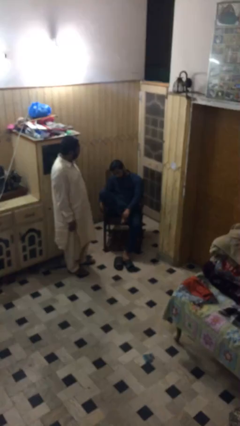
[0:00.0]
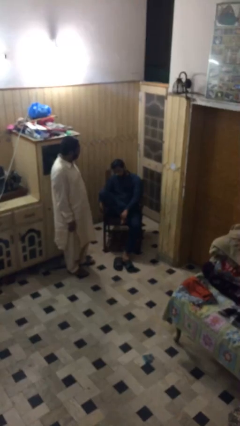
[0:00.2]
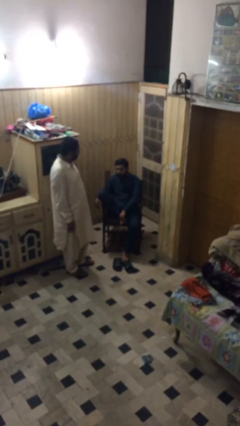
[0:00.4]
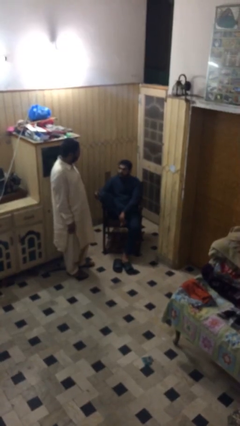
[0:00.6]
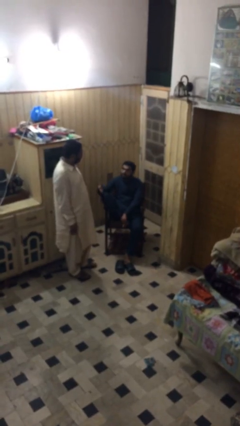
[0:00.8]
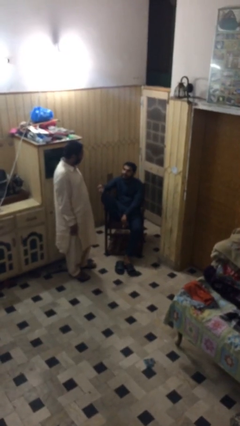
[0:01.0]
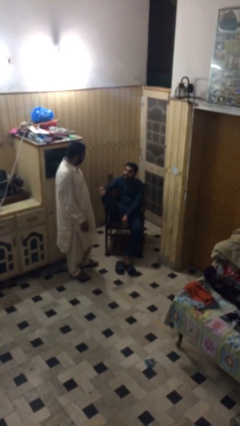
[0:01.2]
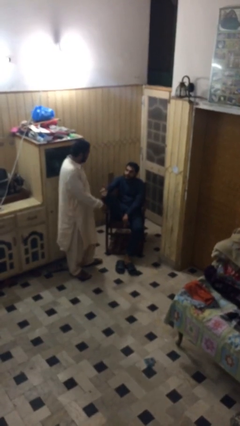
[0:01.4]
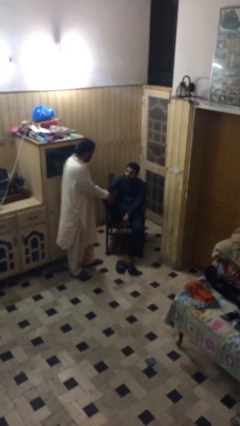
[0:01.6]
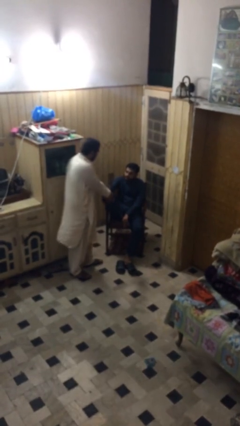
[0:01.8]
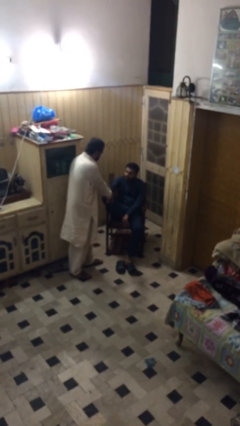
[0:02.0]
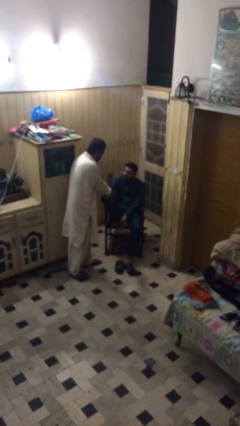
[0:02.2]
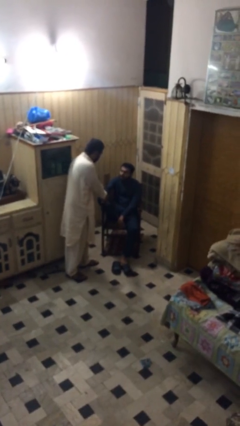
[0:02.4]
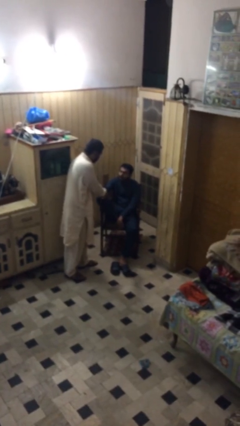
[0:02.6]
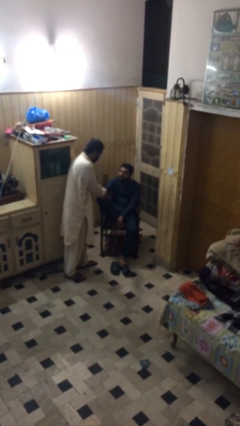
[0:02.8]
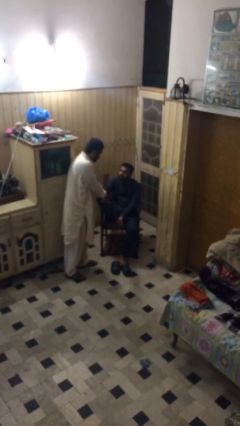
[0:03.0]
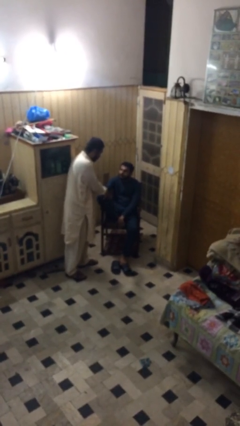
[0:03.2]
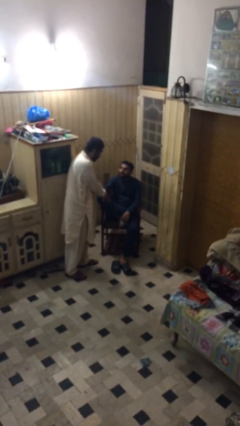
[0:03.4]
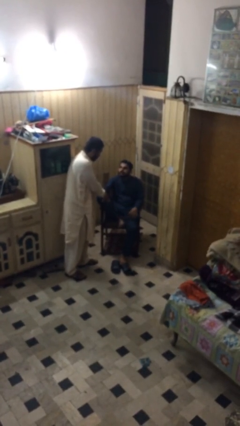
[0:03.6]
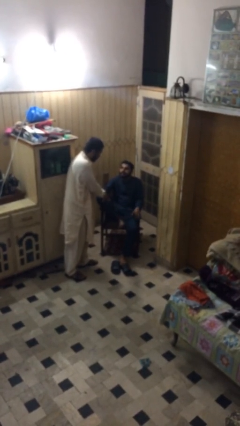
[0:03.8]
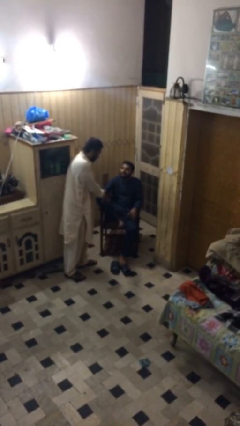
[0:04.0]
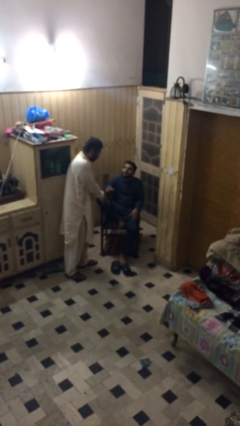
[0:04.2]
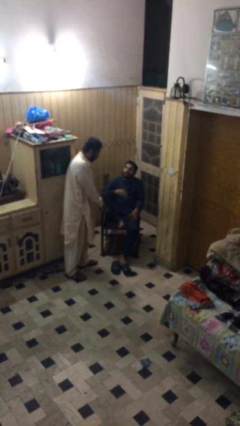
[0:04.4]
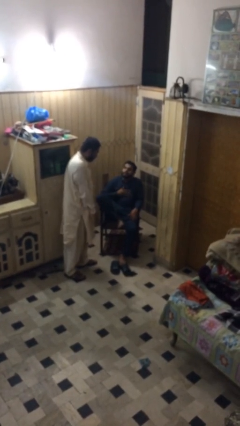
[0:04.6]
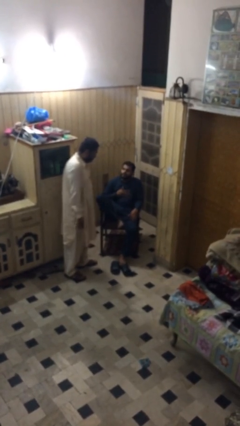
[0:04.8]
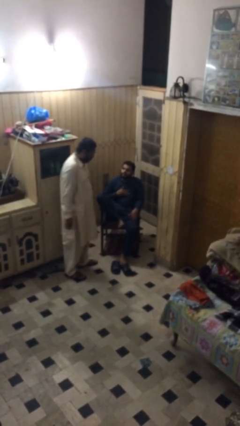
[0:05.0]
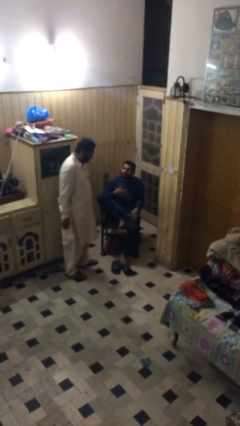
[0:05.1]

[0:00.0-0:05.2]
person shakes hand

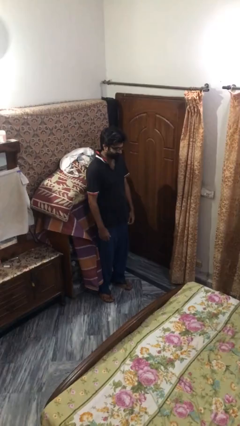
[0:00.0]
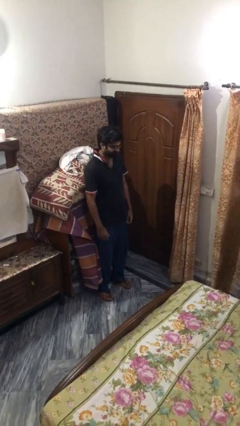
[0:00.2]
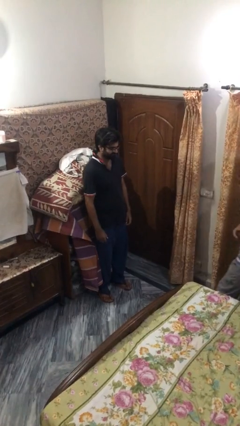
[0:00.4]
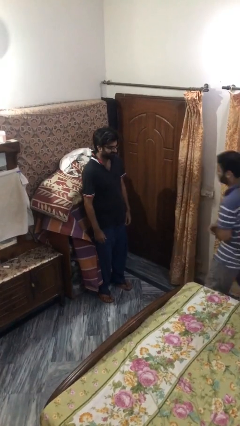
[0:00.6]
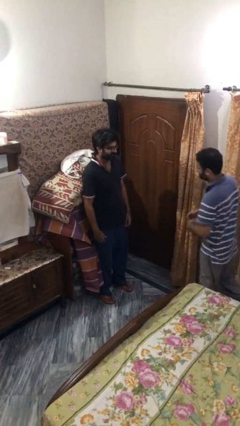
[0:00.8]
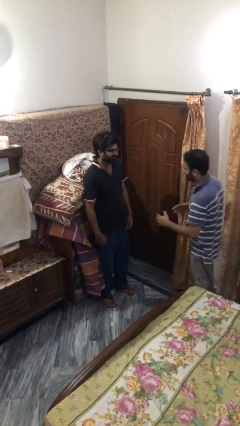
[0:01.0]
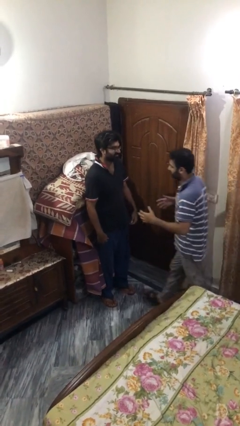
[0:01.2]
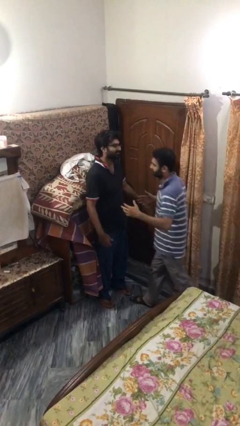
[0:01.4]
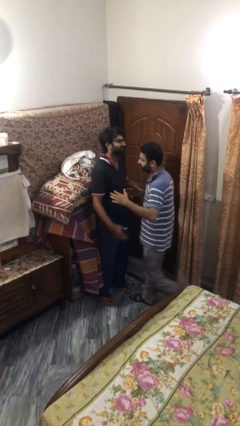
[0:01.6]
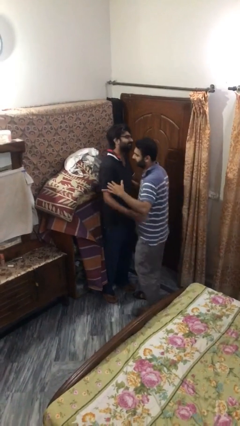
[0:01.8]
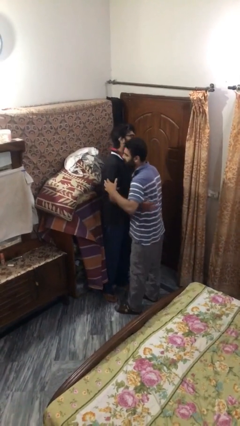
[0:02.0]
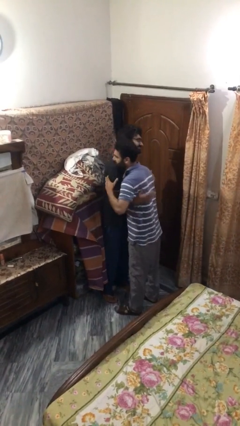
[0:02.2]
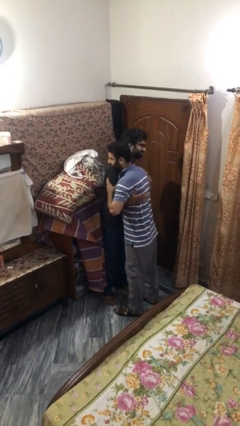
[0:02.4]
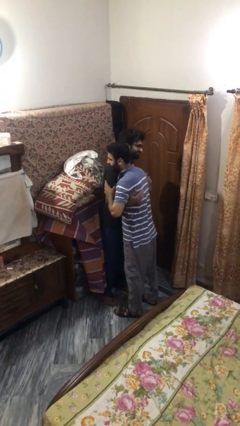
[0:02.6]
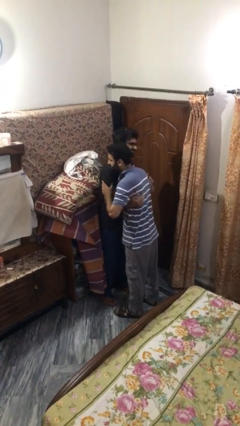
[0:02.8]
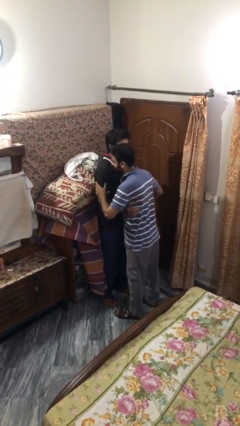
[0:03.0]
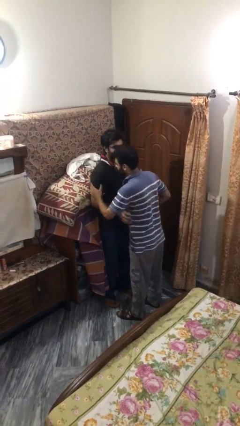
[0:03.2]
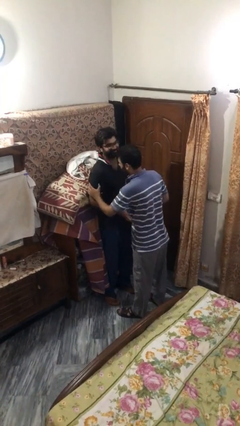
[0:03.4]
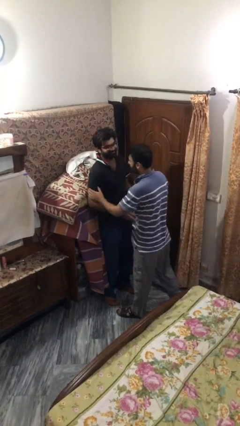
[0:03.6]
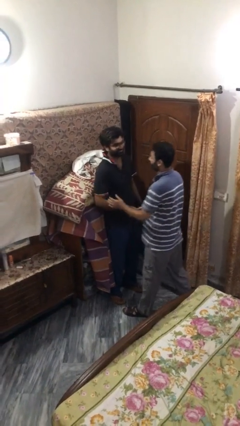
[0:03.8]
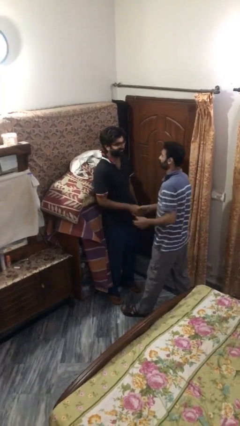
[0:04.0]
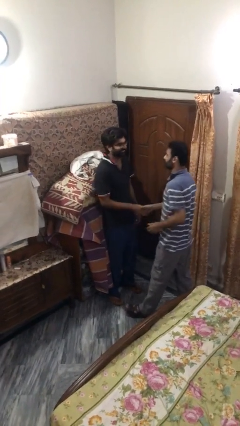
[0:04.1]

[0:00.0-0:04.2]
person embraces person

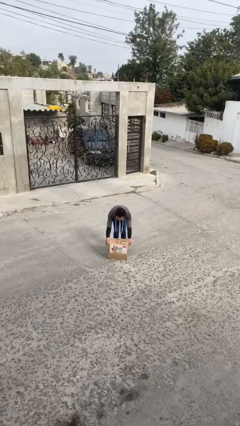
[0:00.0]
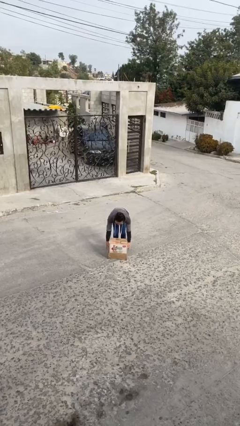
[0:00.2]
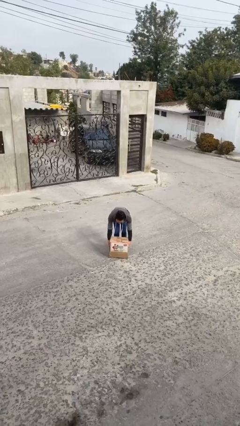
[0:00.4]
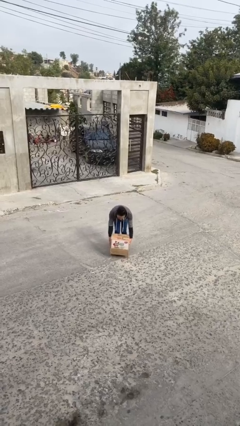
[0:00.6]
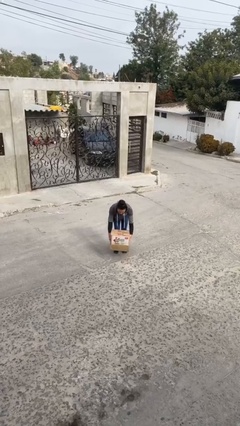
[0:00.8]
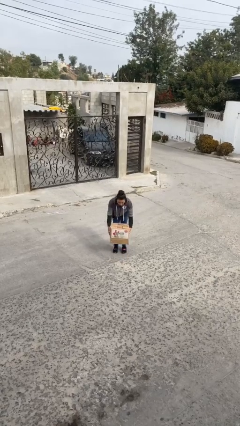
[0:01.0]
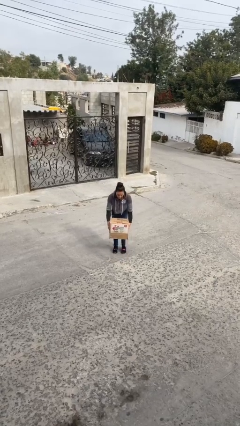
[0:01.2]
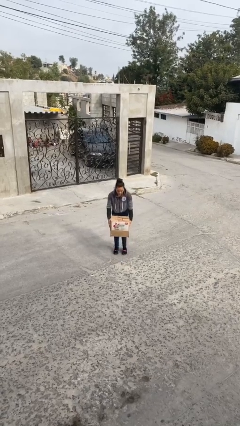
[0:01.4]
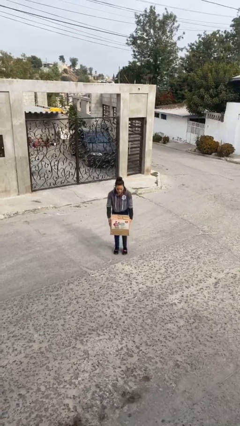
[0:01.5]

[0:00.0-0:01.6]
person picks up object from floor

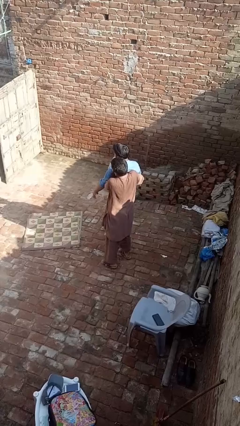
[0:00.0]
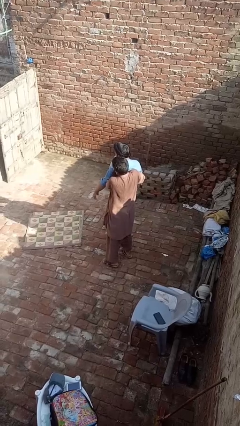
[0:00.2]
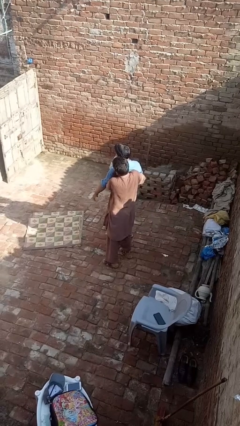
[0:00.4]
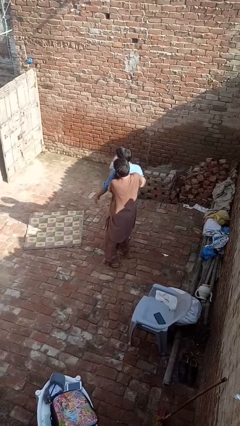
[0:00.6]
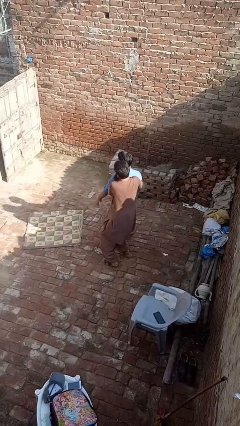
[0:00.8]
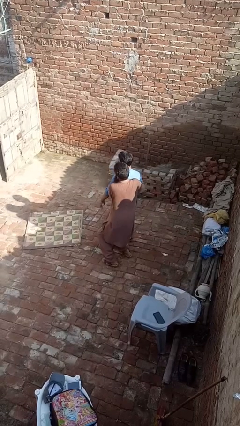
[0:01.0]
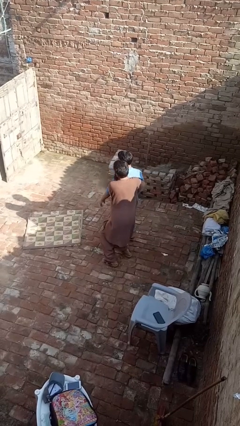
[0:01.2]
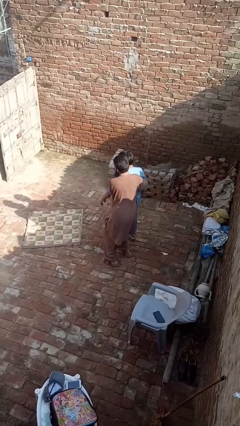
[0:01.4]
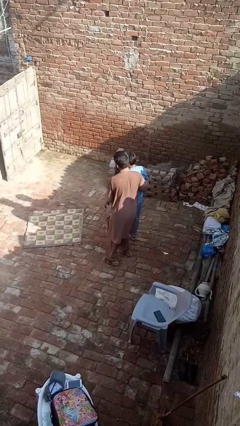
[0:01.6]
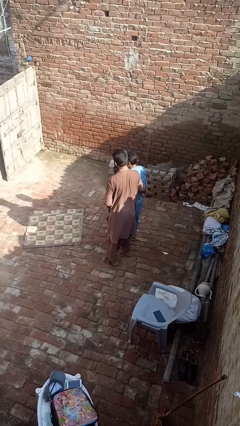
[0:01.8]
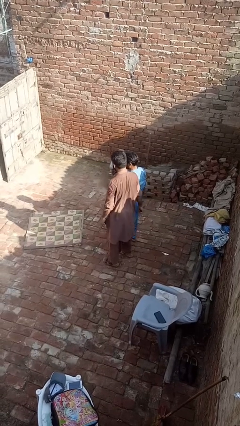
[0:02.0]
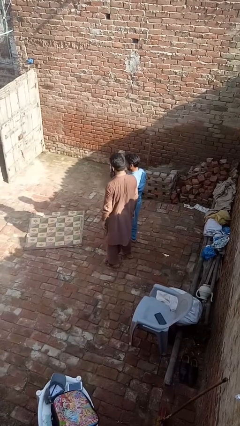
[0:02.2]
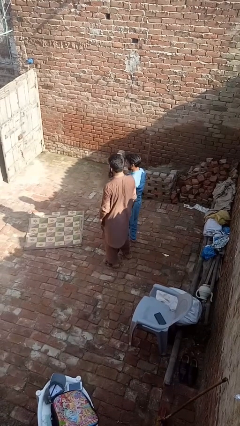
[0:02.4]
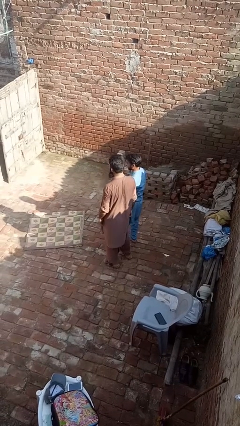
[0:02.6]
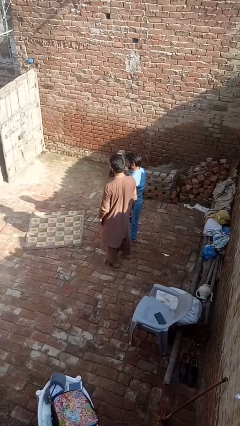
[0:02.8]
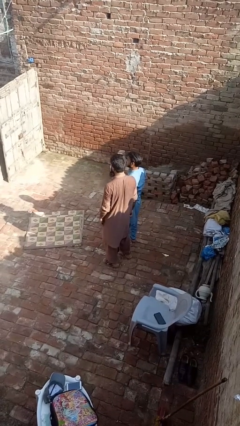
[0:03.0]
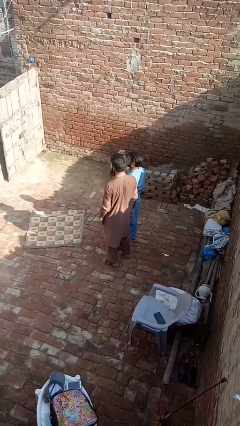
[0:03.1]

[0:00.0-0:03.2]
person puts down person

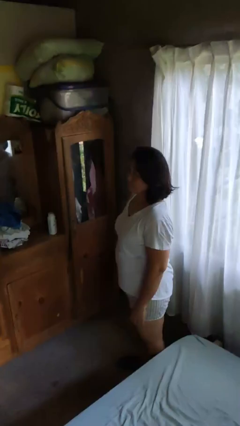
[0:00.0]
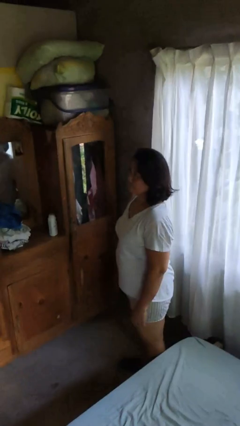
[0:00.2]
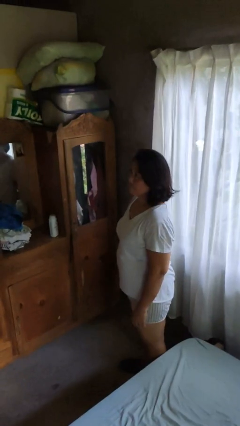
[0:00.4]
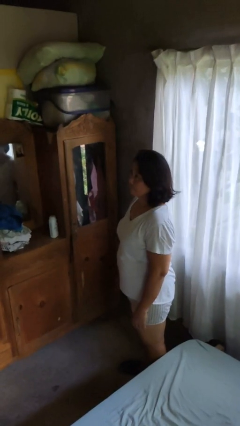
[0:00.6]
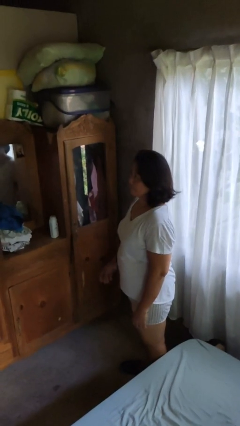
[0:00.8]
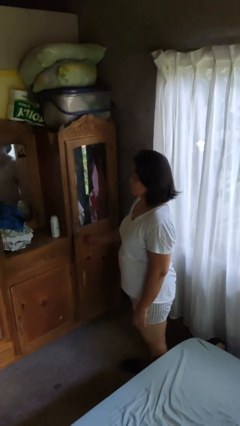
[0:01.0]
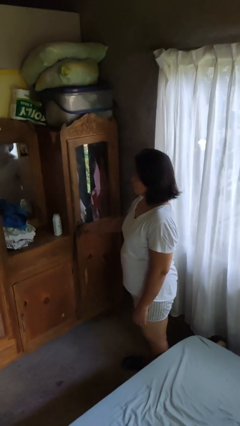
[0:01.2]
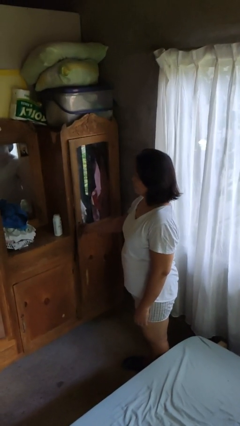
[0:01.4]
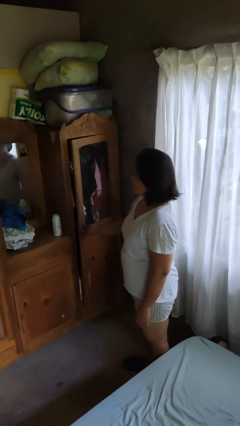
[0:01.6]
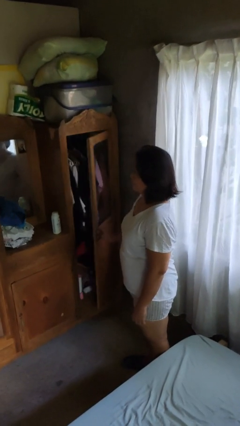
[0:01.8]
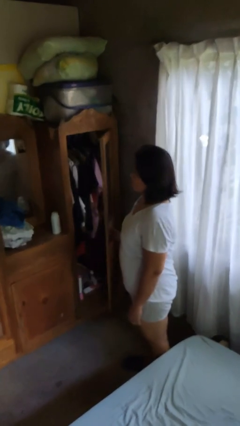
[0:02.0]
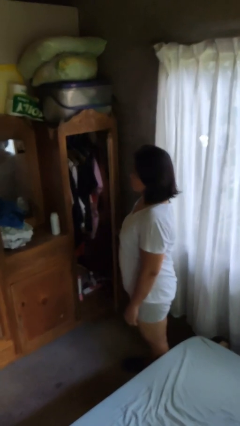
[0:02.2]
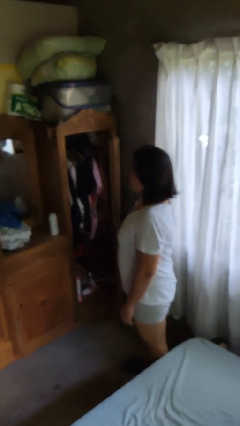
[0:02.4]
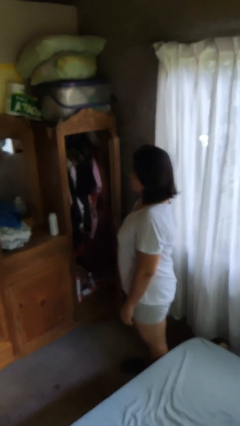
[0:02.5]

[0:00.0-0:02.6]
person opens dresser drawer

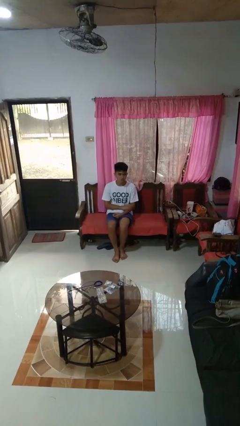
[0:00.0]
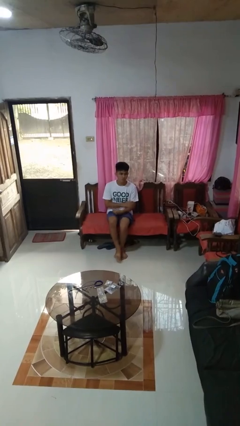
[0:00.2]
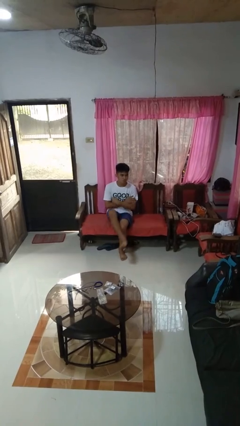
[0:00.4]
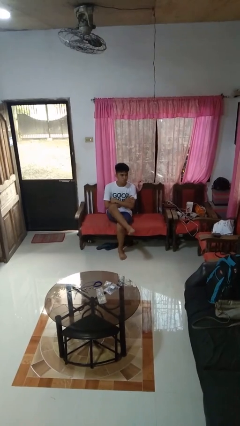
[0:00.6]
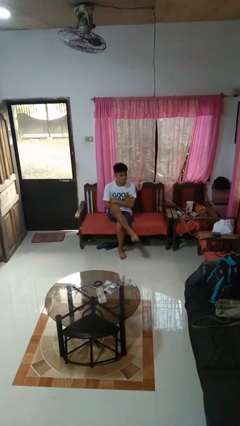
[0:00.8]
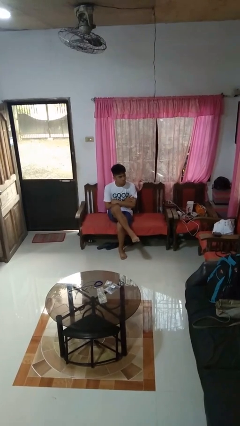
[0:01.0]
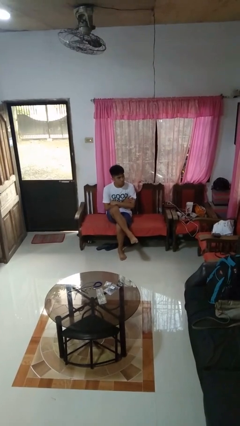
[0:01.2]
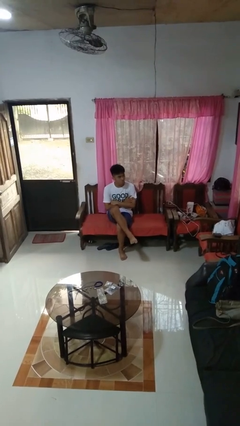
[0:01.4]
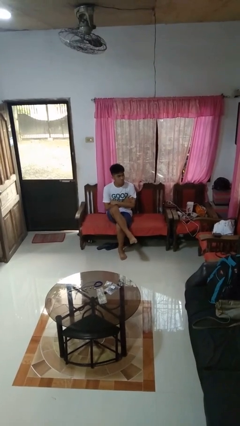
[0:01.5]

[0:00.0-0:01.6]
person crosses legs
